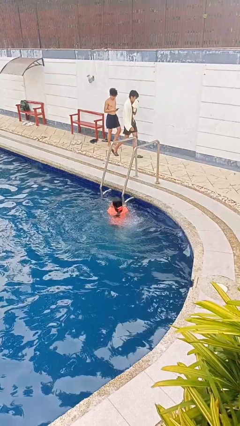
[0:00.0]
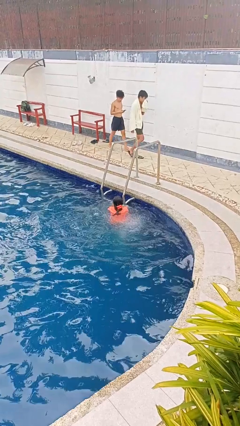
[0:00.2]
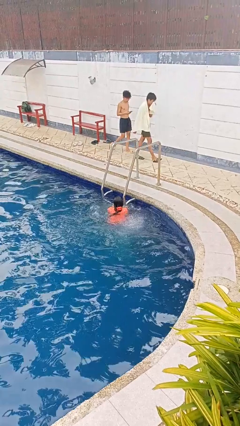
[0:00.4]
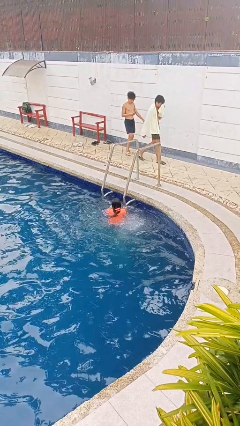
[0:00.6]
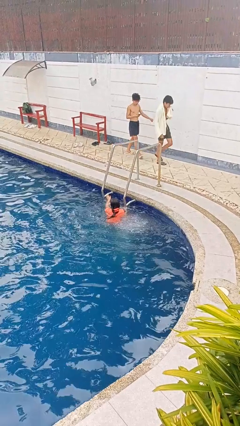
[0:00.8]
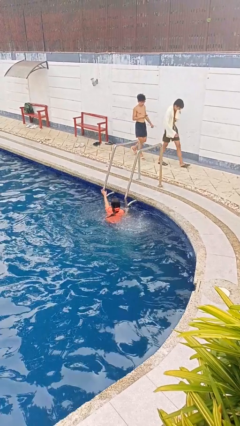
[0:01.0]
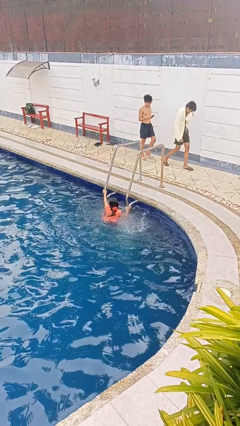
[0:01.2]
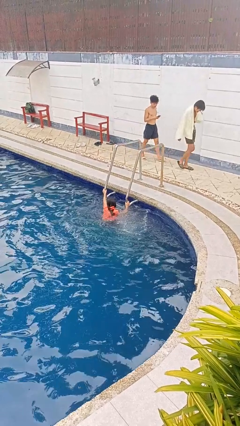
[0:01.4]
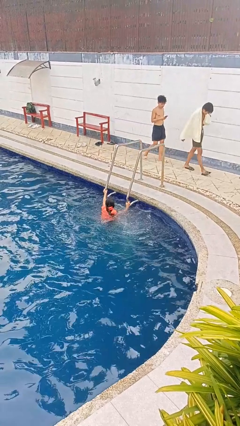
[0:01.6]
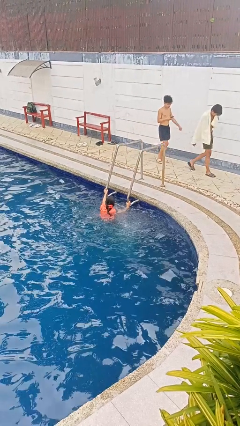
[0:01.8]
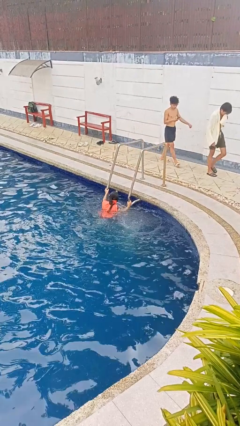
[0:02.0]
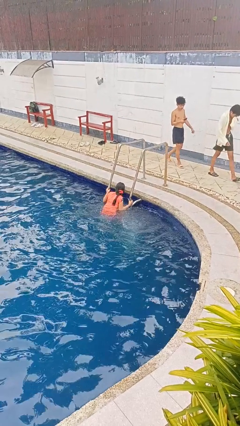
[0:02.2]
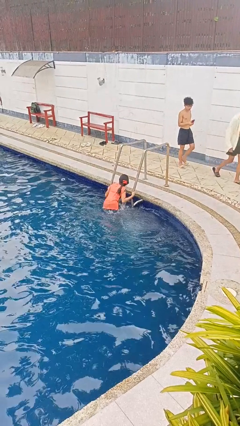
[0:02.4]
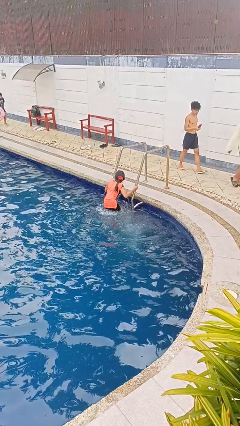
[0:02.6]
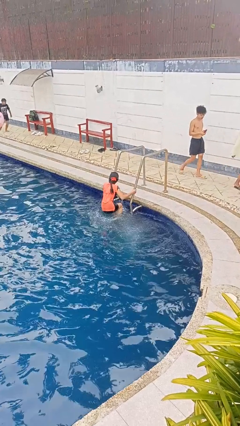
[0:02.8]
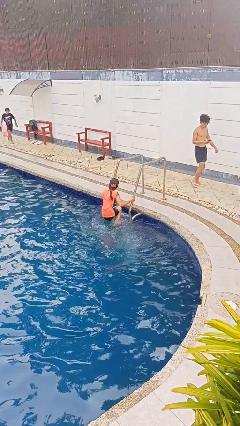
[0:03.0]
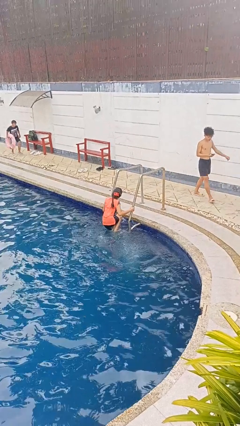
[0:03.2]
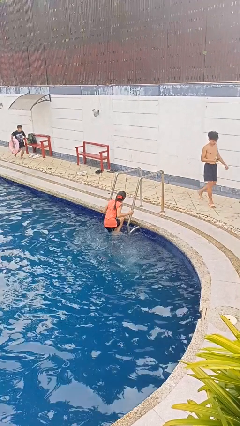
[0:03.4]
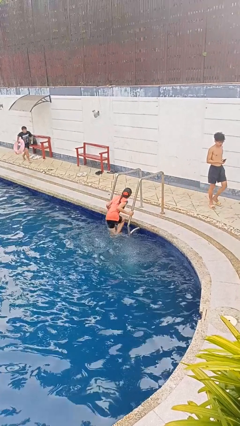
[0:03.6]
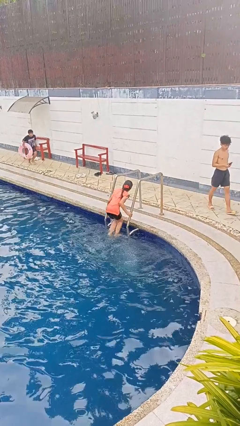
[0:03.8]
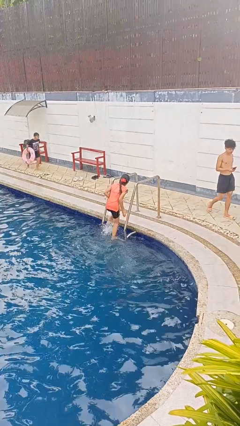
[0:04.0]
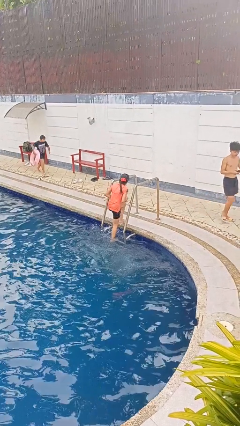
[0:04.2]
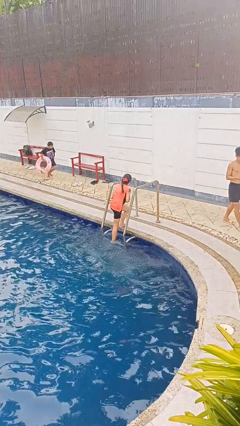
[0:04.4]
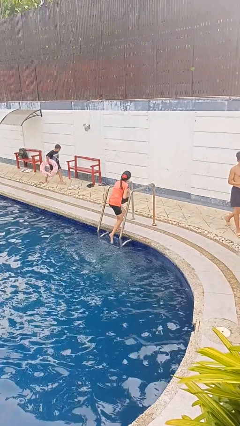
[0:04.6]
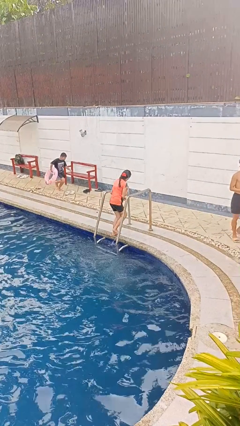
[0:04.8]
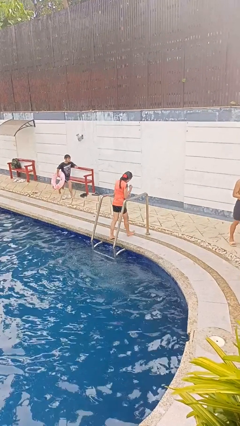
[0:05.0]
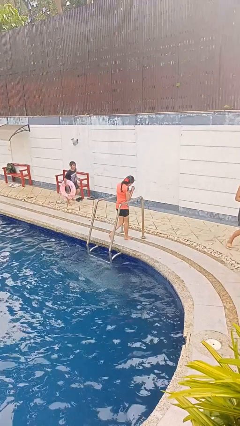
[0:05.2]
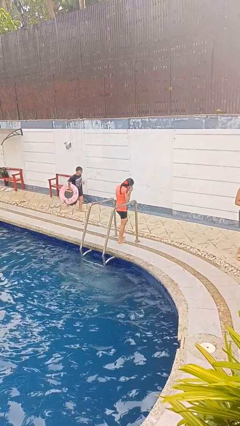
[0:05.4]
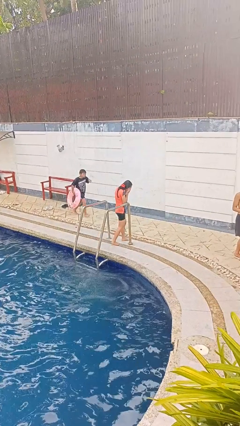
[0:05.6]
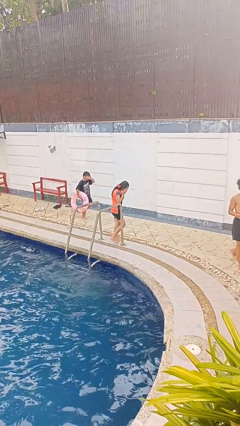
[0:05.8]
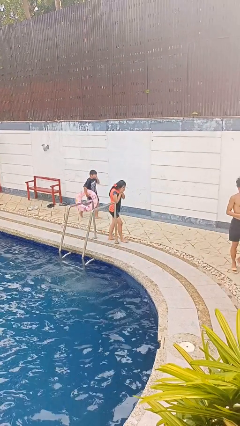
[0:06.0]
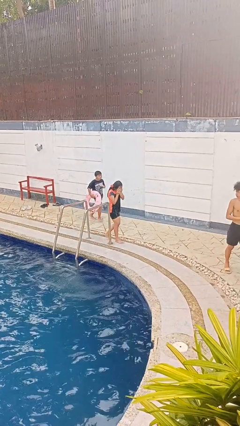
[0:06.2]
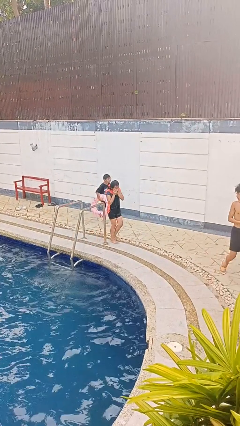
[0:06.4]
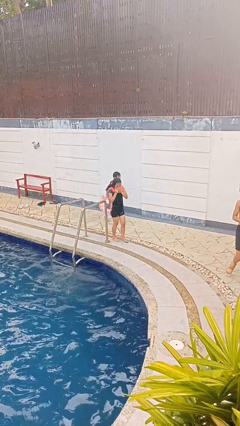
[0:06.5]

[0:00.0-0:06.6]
person exits pool

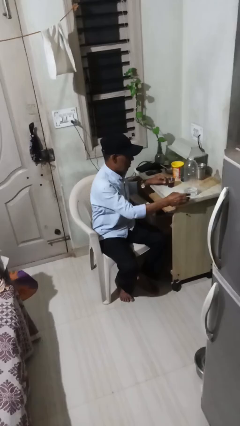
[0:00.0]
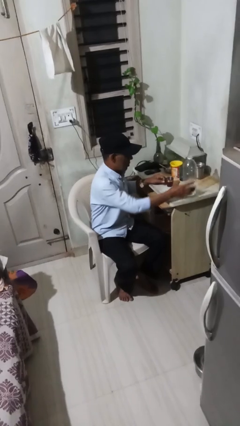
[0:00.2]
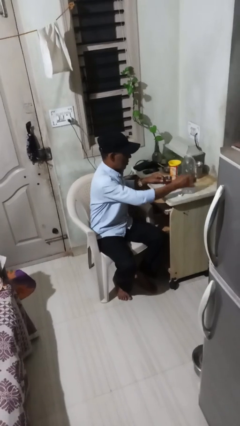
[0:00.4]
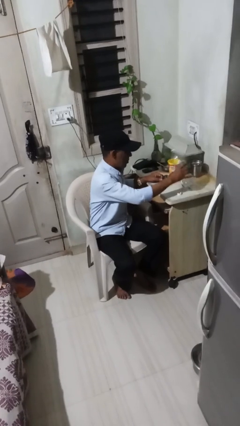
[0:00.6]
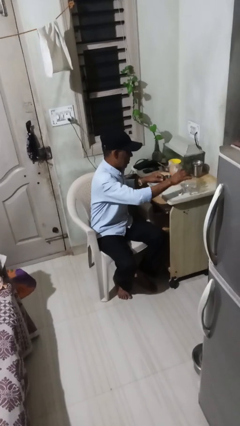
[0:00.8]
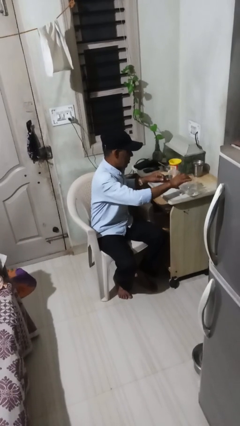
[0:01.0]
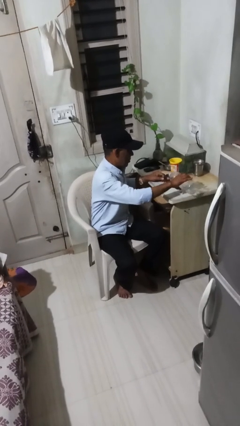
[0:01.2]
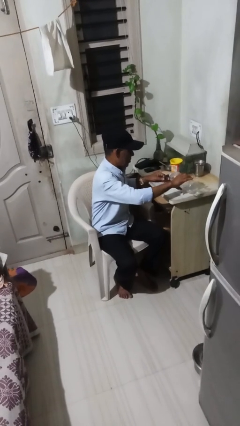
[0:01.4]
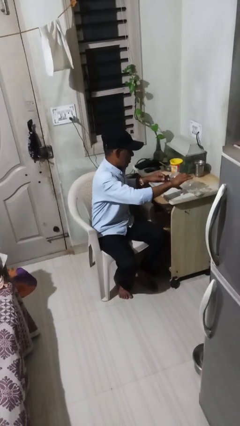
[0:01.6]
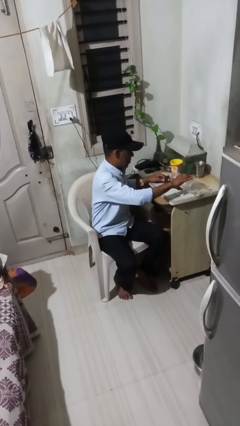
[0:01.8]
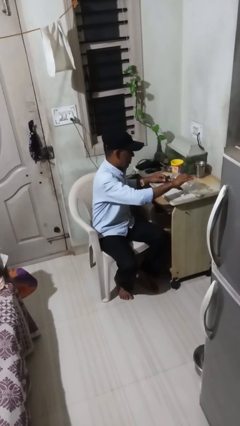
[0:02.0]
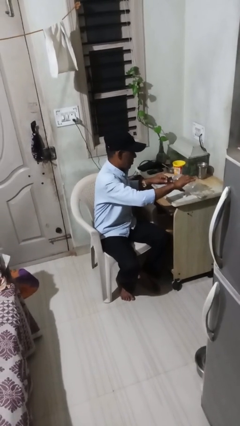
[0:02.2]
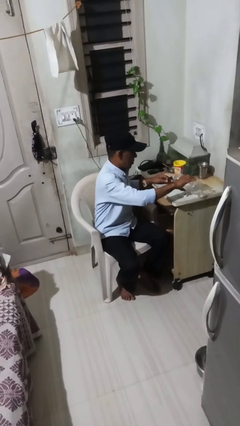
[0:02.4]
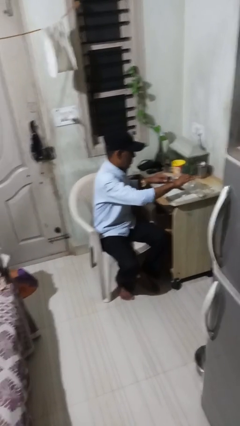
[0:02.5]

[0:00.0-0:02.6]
person pours liquid into cup

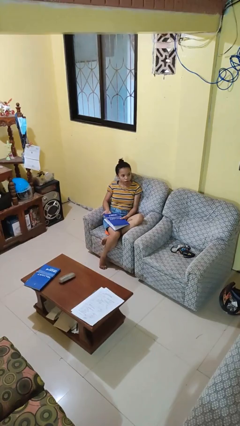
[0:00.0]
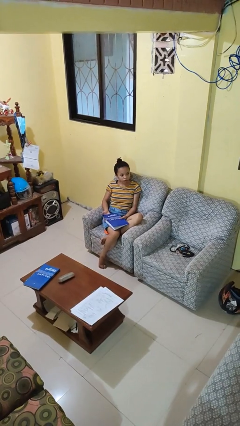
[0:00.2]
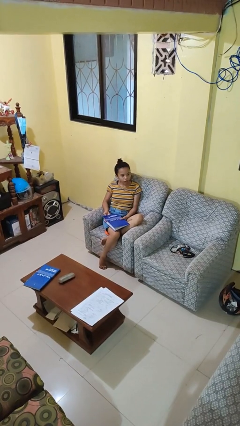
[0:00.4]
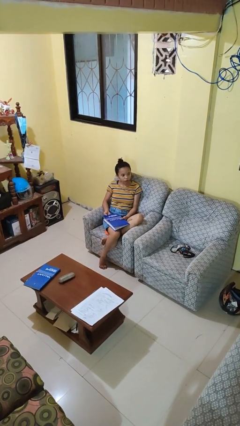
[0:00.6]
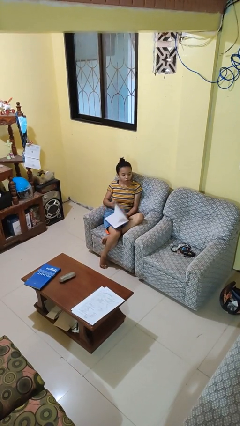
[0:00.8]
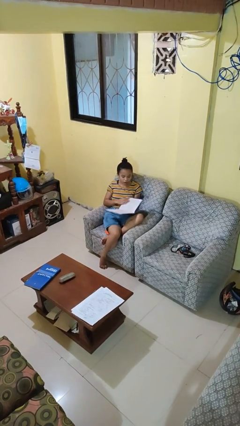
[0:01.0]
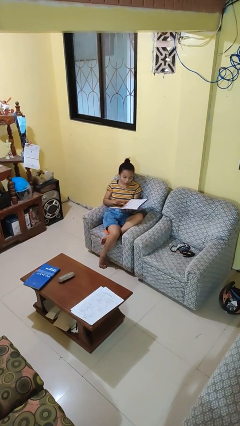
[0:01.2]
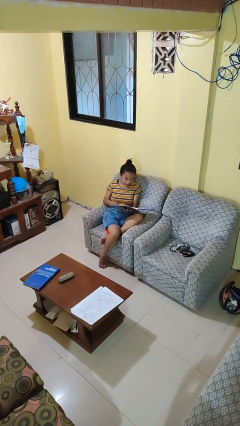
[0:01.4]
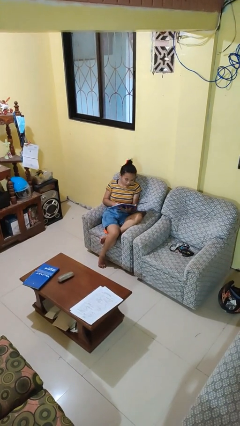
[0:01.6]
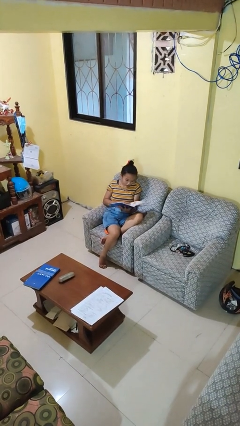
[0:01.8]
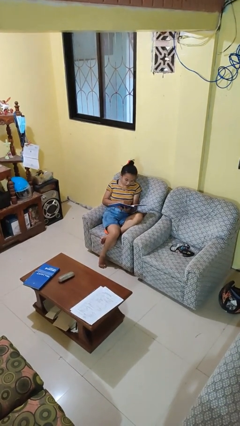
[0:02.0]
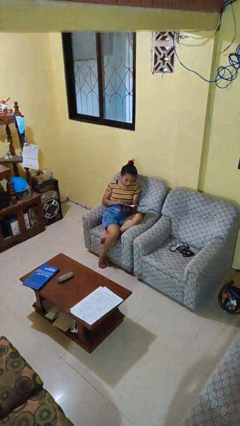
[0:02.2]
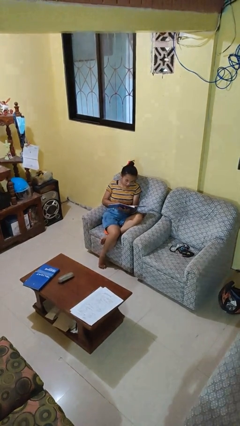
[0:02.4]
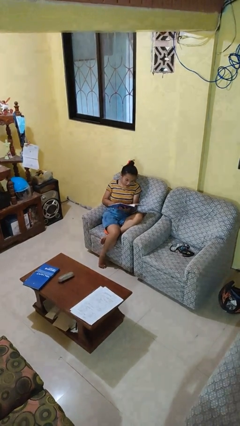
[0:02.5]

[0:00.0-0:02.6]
person reads book

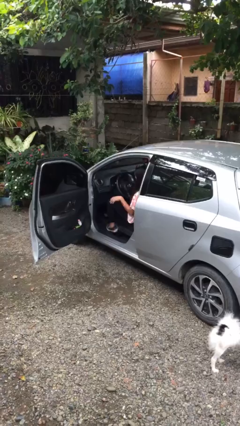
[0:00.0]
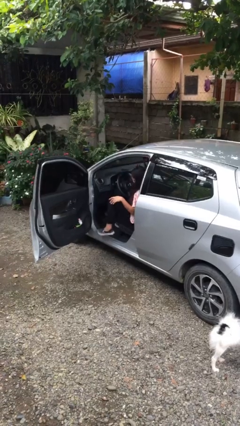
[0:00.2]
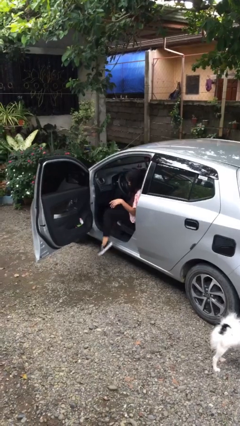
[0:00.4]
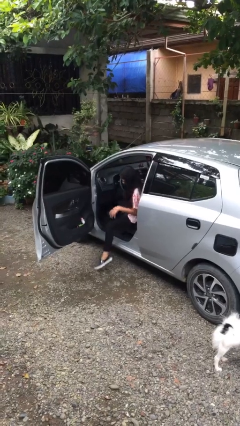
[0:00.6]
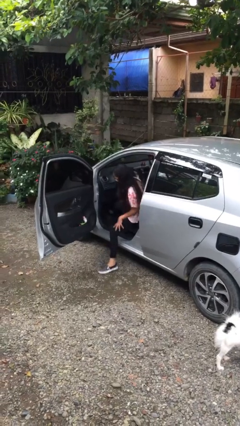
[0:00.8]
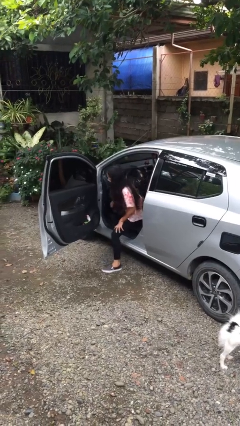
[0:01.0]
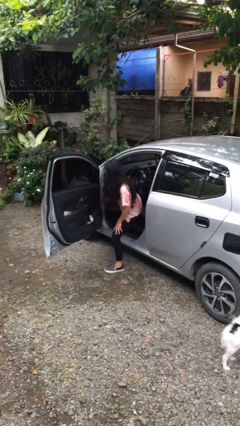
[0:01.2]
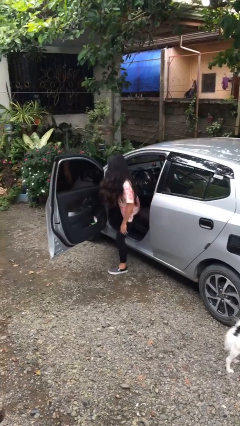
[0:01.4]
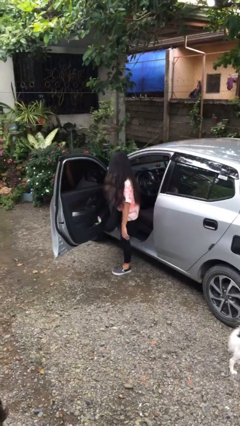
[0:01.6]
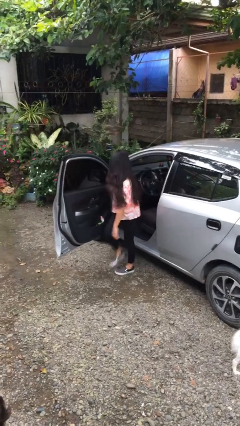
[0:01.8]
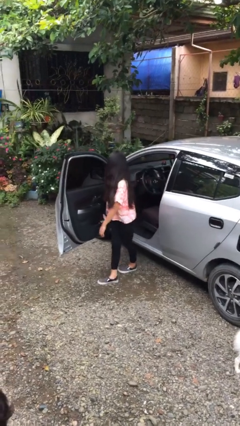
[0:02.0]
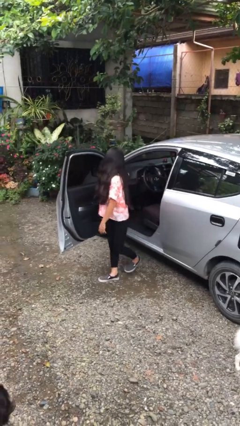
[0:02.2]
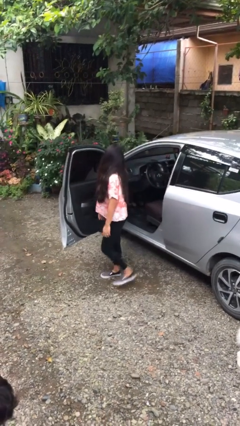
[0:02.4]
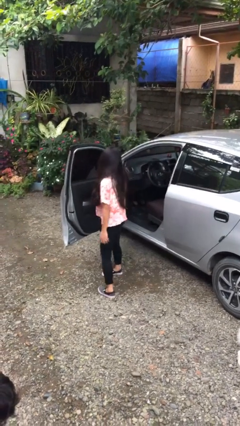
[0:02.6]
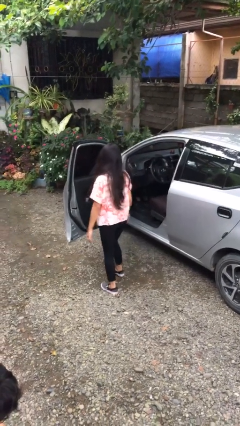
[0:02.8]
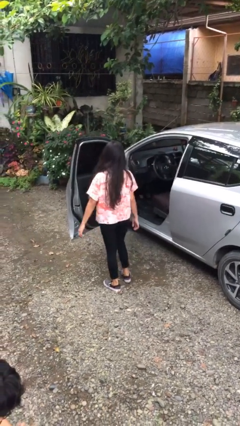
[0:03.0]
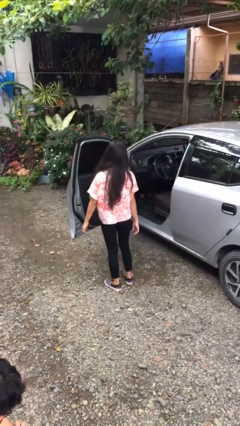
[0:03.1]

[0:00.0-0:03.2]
person exits car

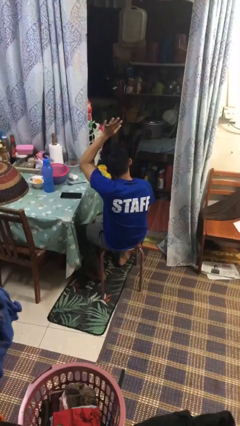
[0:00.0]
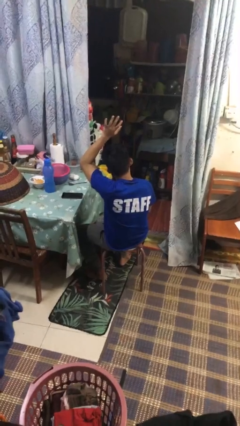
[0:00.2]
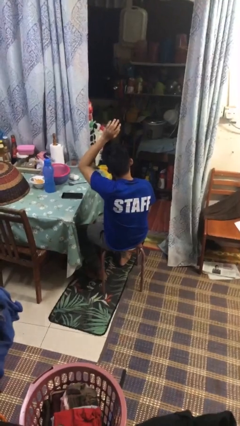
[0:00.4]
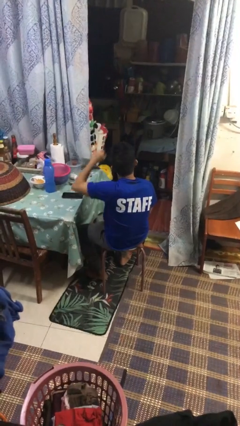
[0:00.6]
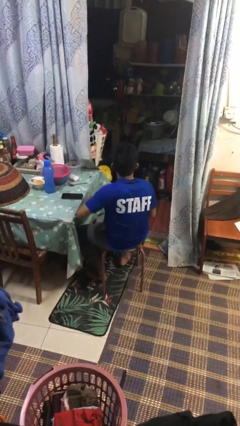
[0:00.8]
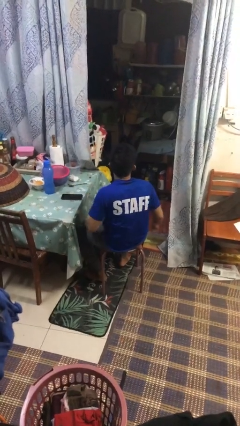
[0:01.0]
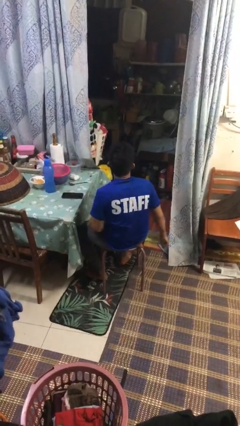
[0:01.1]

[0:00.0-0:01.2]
person gestures lower hand

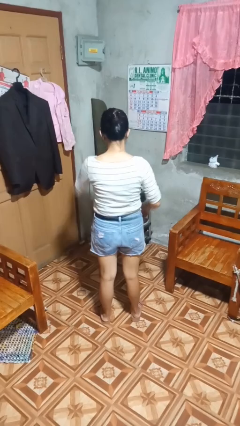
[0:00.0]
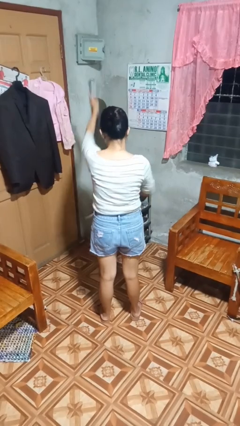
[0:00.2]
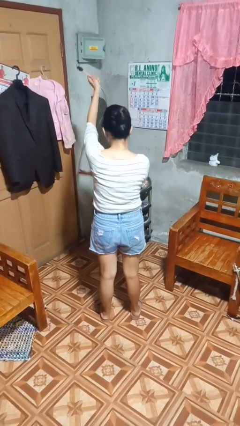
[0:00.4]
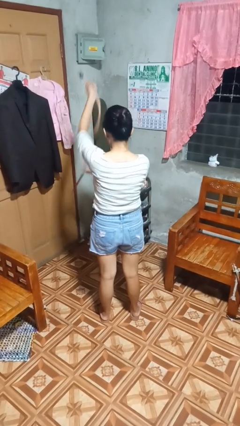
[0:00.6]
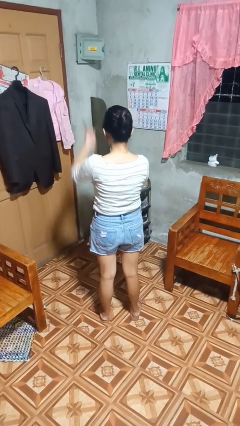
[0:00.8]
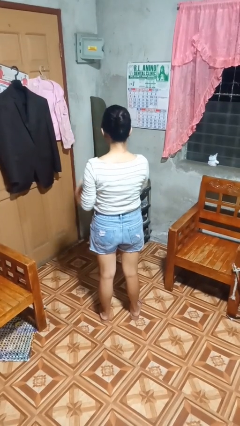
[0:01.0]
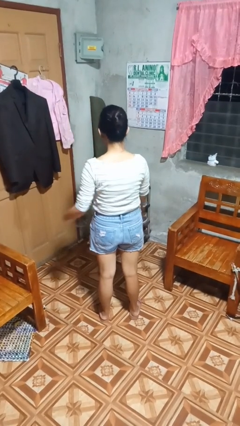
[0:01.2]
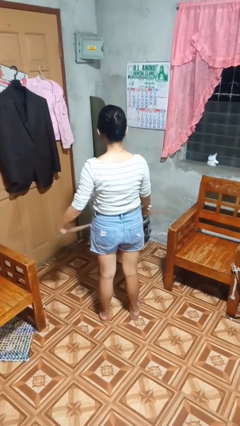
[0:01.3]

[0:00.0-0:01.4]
person takes off belt
